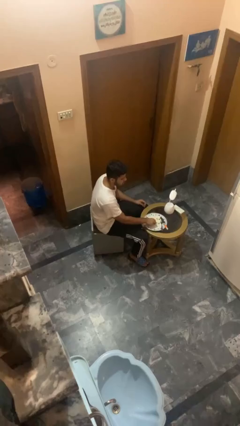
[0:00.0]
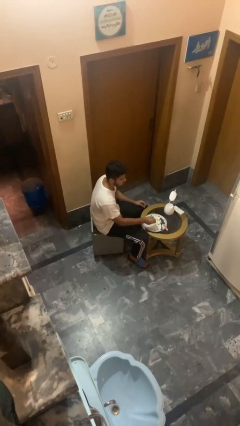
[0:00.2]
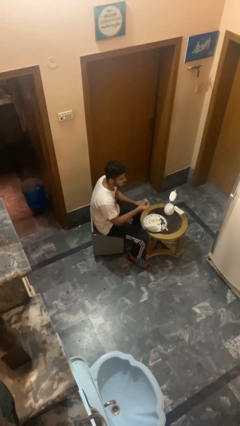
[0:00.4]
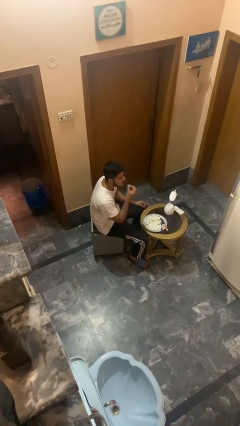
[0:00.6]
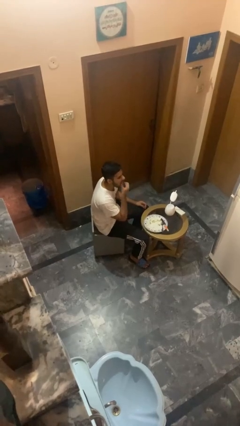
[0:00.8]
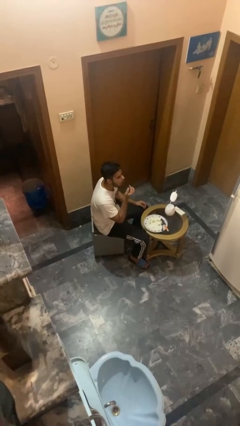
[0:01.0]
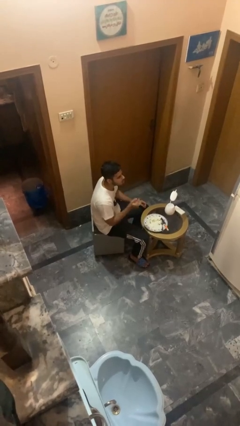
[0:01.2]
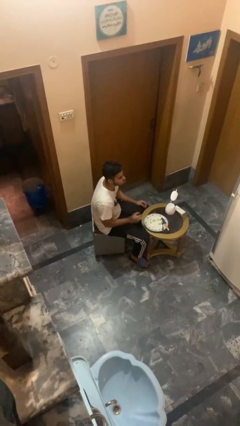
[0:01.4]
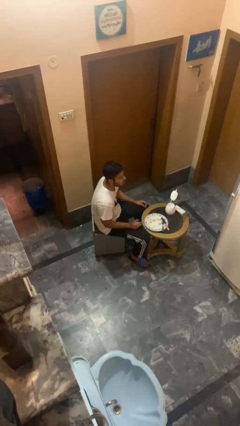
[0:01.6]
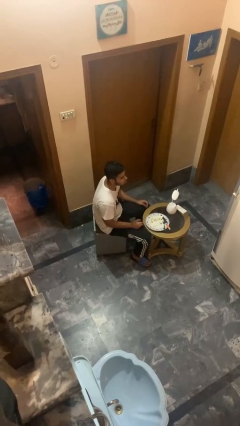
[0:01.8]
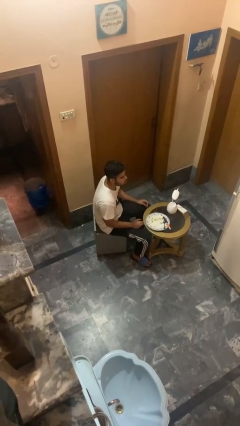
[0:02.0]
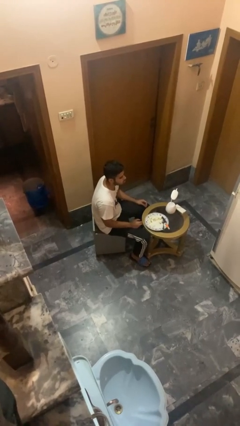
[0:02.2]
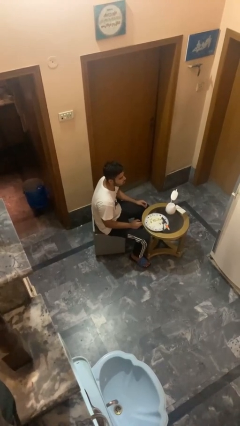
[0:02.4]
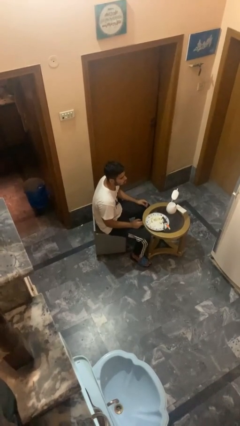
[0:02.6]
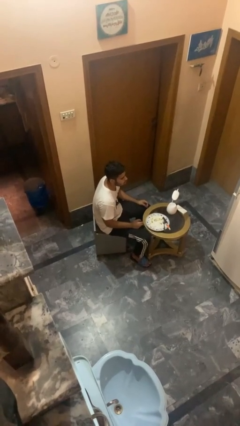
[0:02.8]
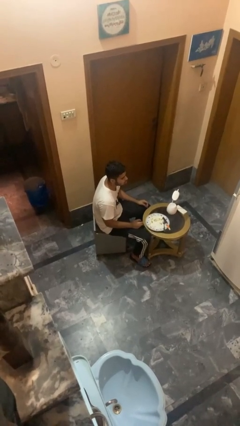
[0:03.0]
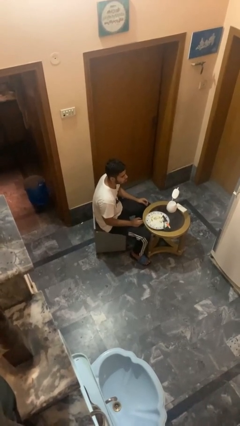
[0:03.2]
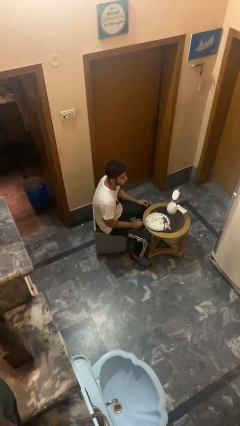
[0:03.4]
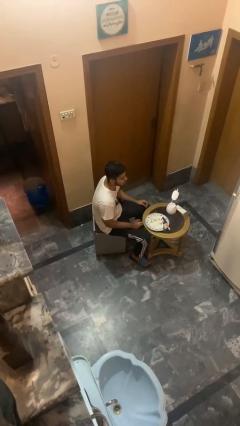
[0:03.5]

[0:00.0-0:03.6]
person eats with hands

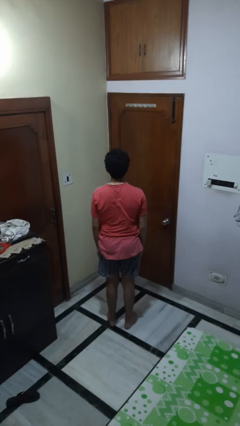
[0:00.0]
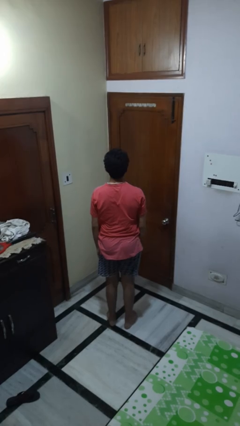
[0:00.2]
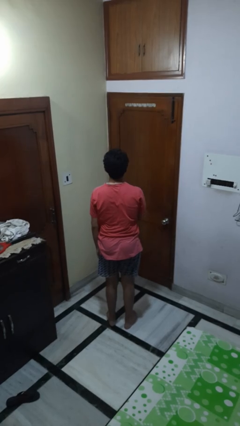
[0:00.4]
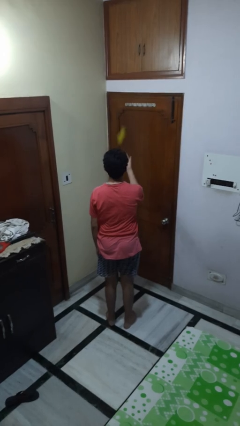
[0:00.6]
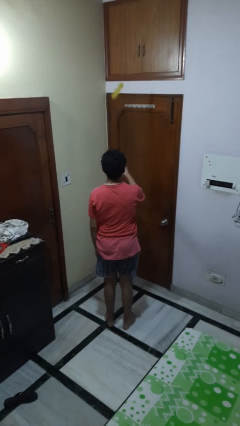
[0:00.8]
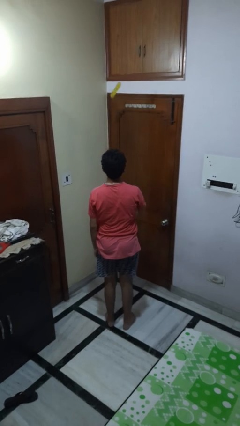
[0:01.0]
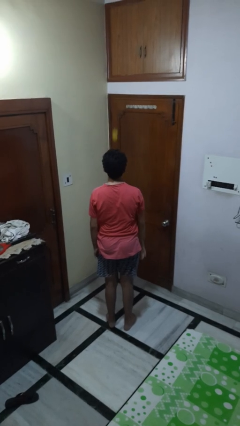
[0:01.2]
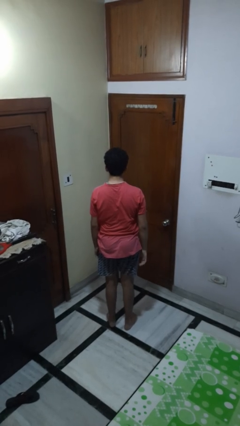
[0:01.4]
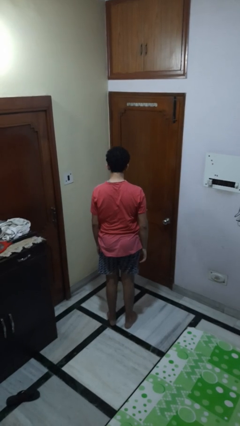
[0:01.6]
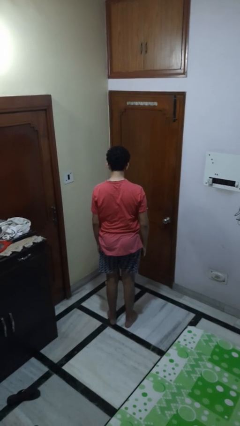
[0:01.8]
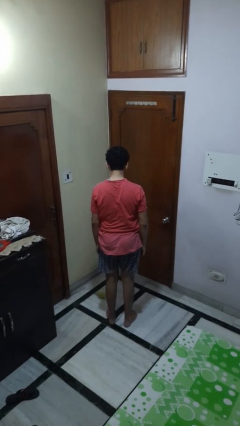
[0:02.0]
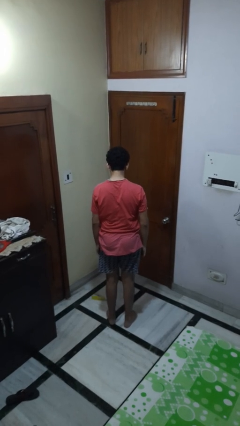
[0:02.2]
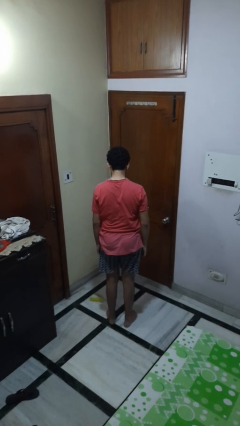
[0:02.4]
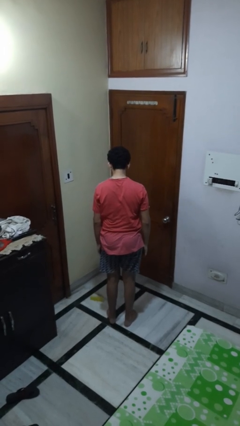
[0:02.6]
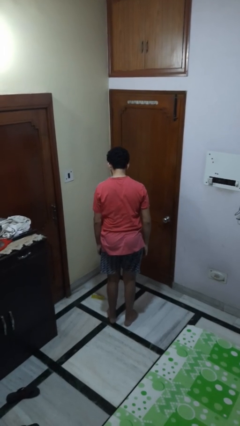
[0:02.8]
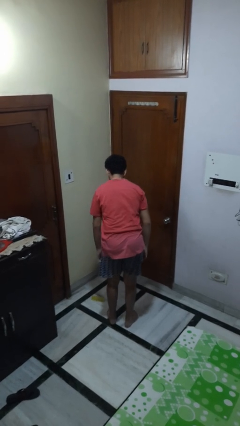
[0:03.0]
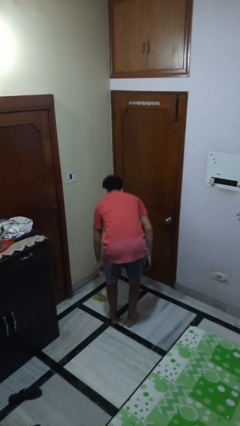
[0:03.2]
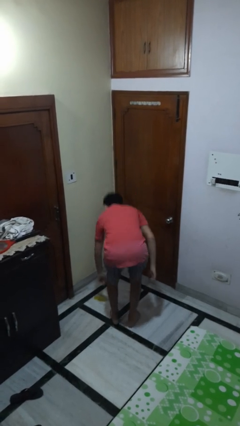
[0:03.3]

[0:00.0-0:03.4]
person throws object into air

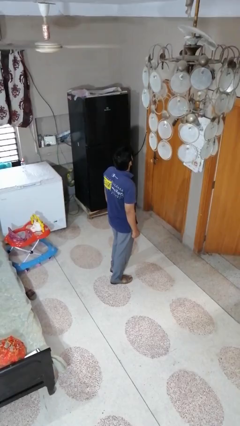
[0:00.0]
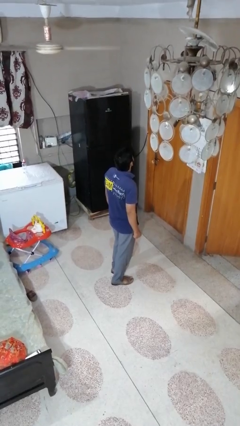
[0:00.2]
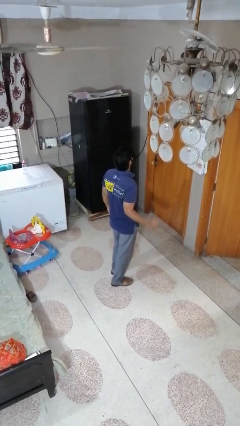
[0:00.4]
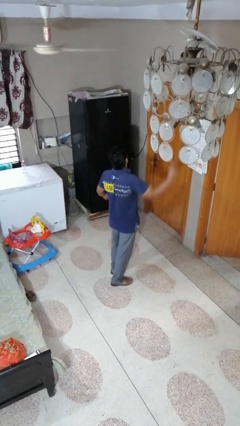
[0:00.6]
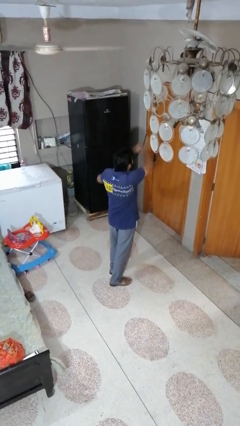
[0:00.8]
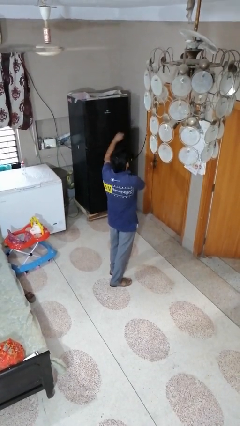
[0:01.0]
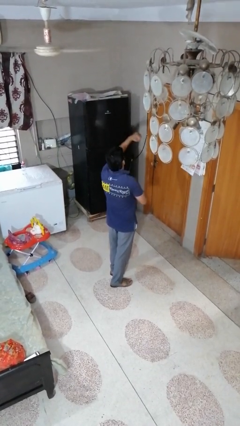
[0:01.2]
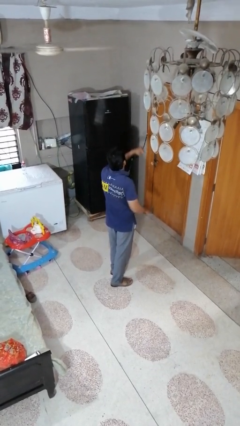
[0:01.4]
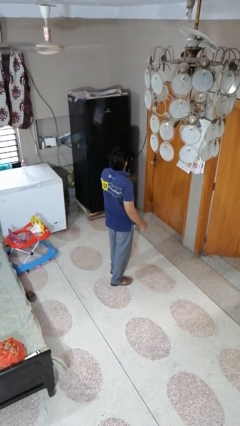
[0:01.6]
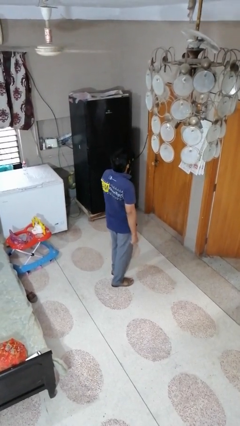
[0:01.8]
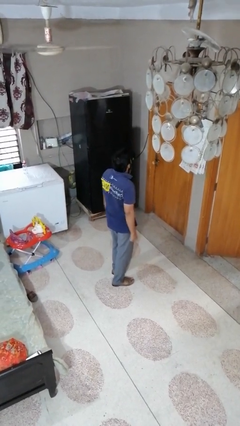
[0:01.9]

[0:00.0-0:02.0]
person punches

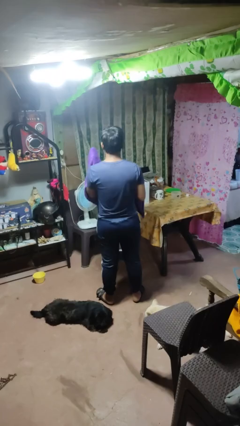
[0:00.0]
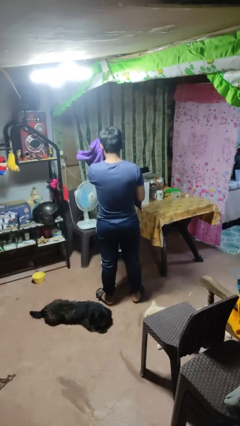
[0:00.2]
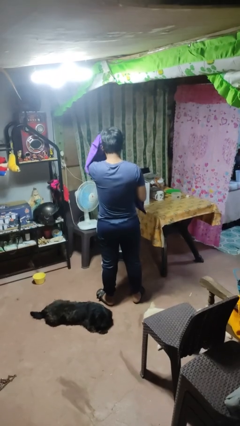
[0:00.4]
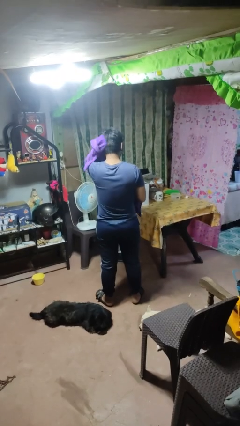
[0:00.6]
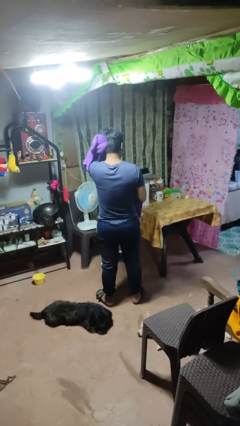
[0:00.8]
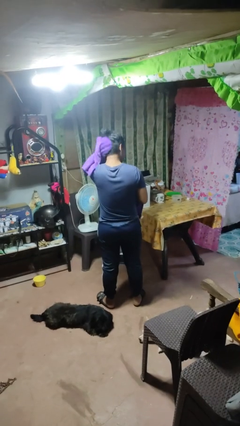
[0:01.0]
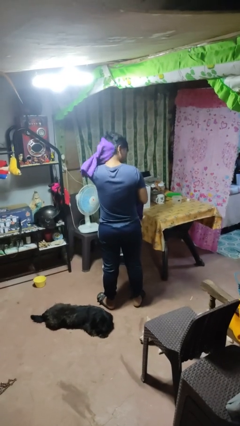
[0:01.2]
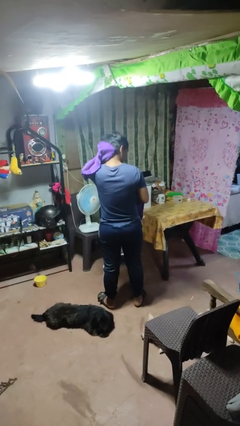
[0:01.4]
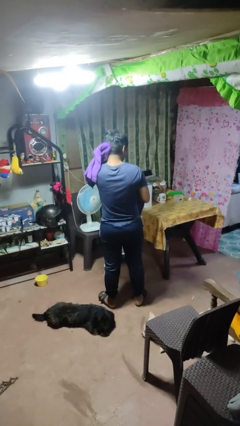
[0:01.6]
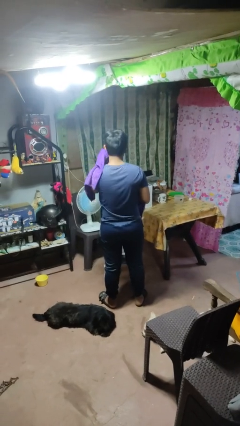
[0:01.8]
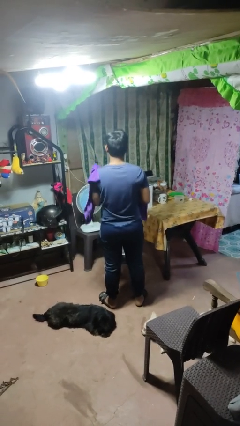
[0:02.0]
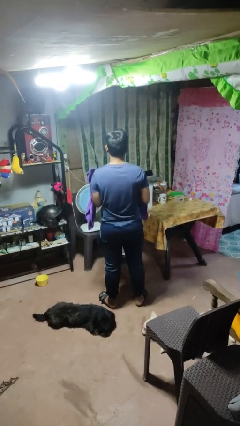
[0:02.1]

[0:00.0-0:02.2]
person dries hair with towel

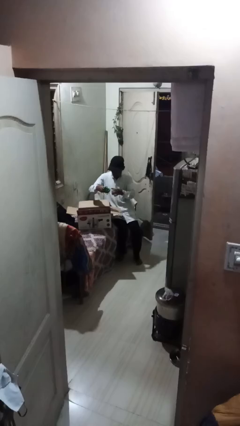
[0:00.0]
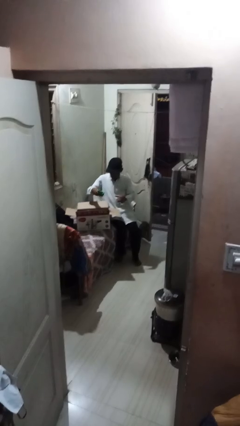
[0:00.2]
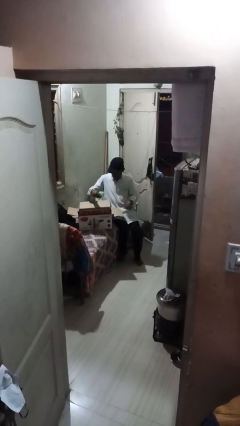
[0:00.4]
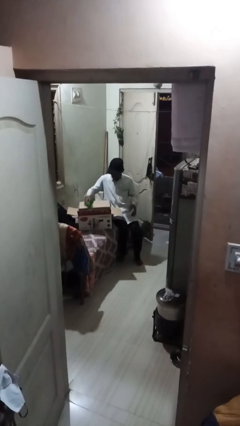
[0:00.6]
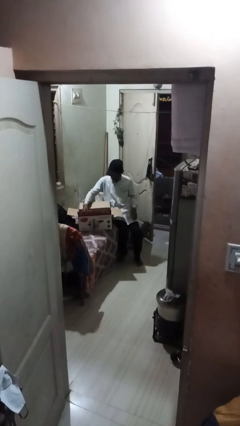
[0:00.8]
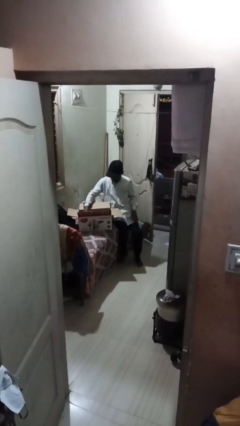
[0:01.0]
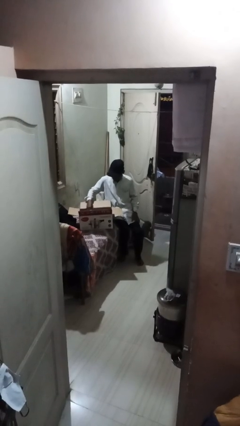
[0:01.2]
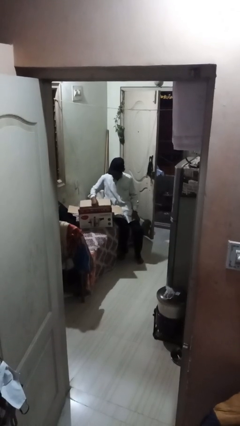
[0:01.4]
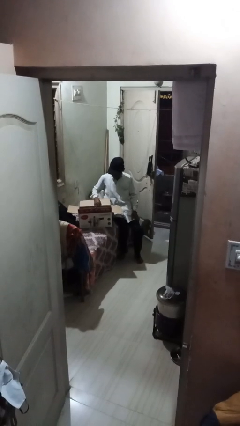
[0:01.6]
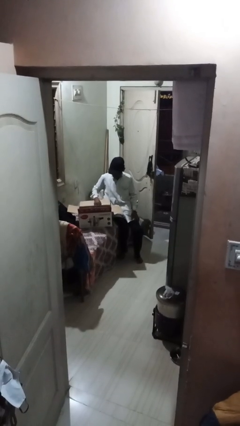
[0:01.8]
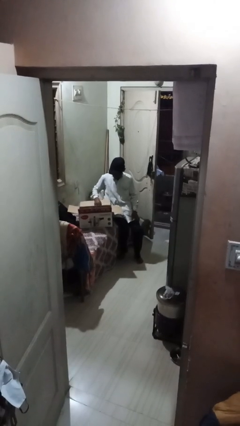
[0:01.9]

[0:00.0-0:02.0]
person puts object into box

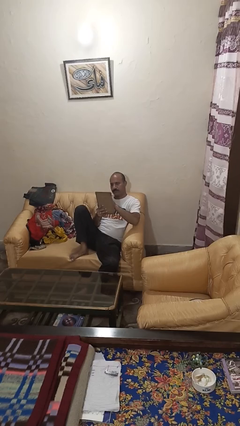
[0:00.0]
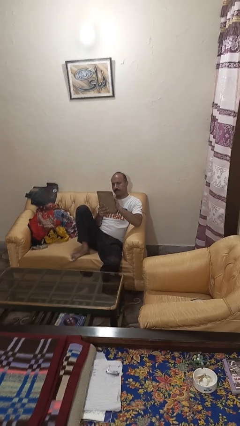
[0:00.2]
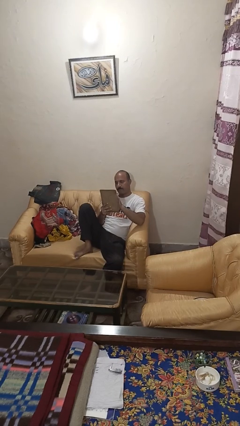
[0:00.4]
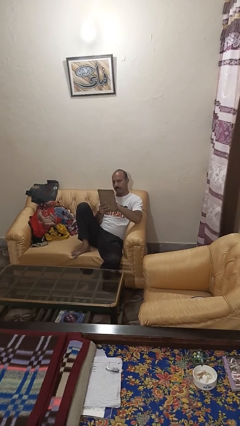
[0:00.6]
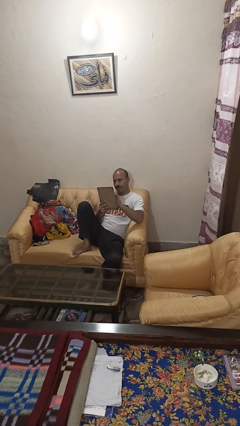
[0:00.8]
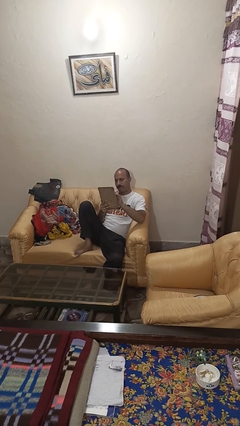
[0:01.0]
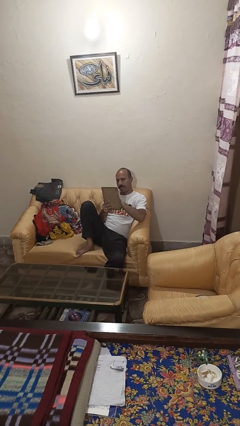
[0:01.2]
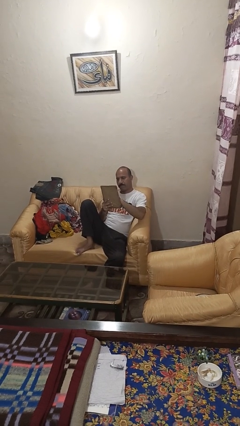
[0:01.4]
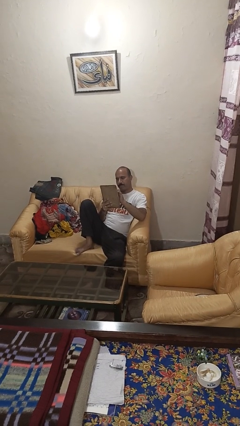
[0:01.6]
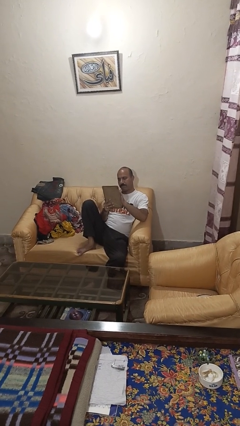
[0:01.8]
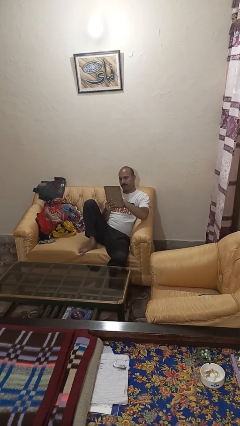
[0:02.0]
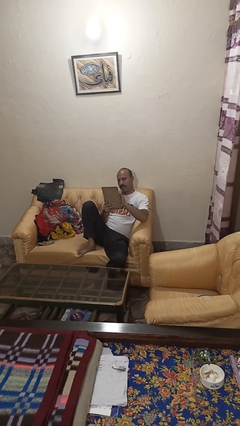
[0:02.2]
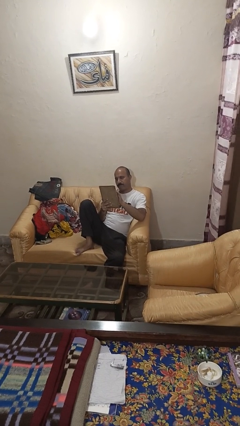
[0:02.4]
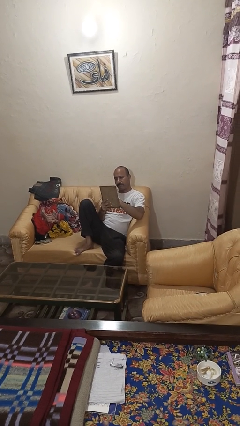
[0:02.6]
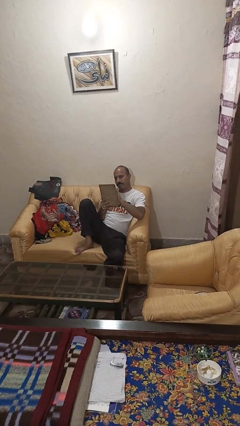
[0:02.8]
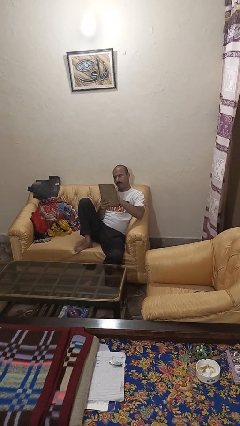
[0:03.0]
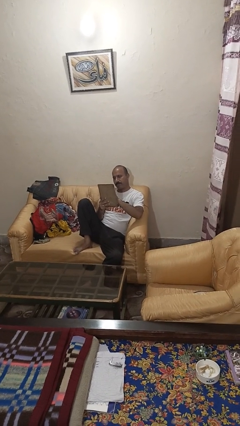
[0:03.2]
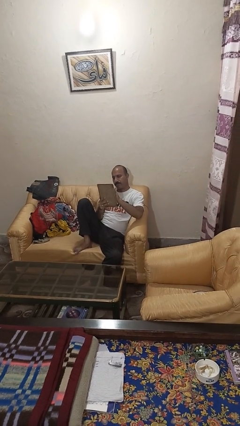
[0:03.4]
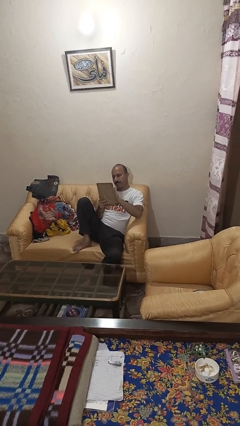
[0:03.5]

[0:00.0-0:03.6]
person interacts with tablet
